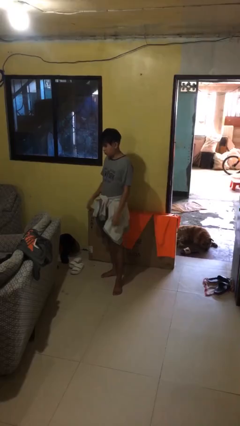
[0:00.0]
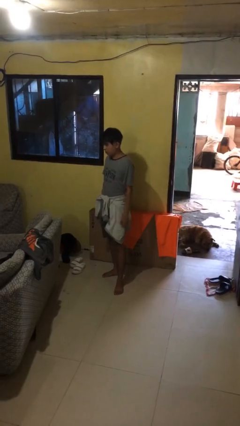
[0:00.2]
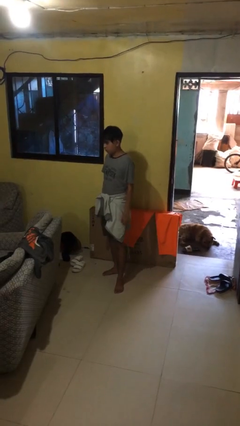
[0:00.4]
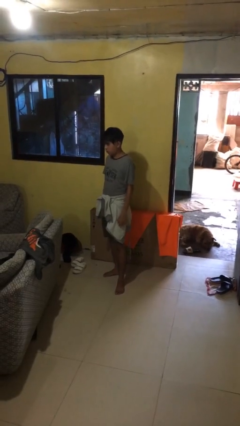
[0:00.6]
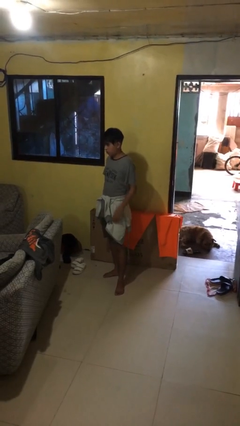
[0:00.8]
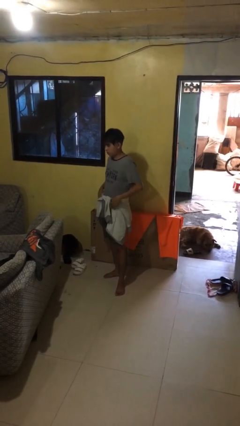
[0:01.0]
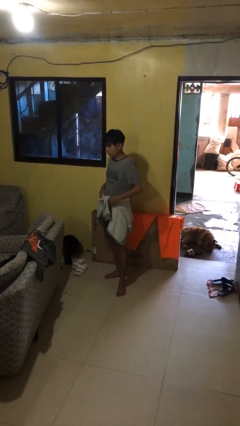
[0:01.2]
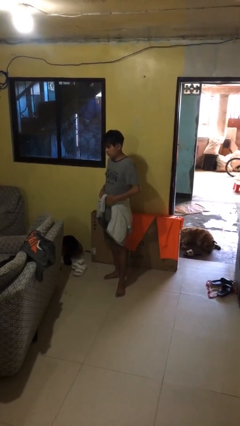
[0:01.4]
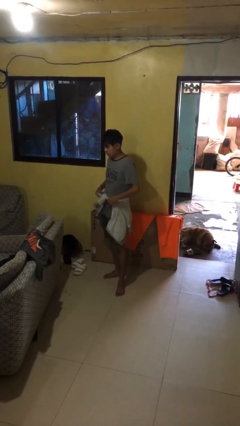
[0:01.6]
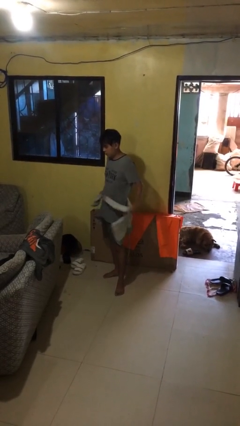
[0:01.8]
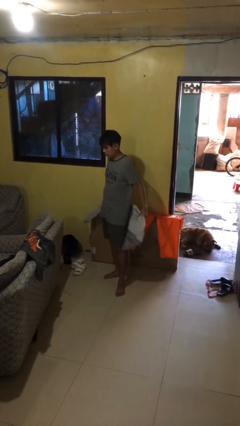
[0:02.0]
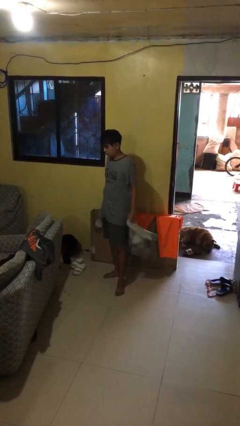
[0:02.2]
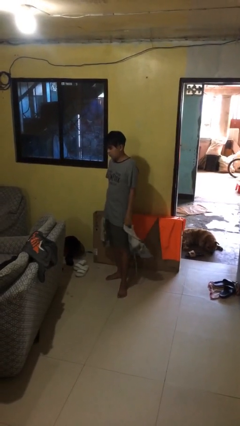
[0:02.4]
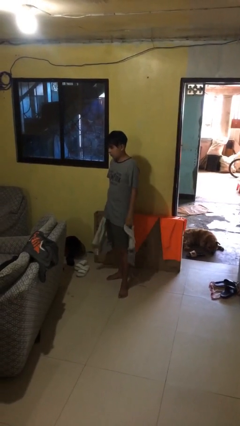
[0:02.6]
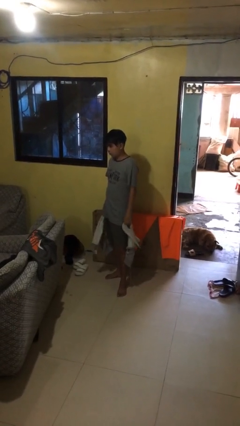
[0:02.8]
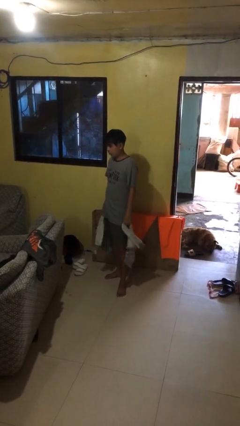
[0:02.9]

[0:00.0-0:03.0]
person unties jacket around waist

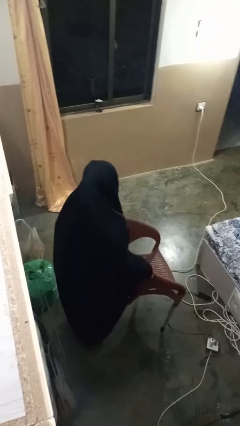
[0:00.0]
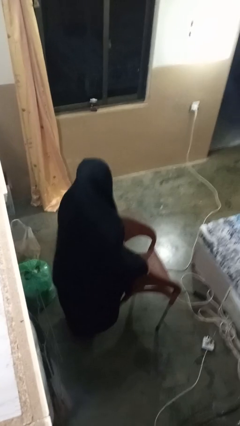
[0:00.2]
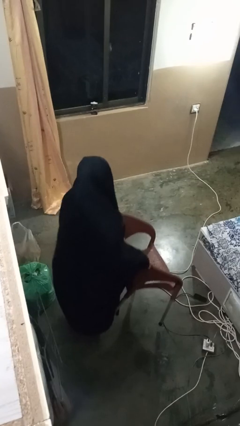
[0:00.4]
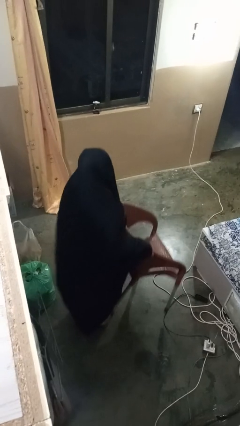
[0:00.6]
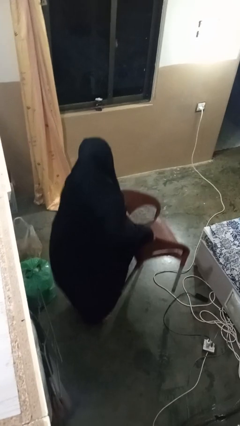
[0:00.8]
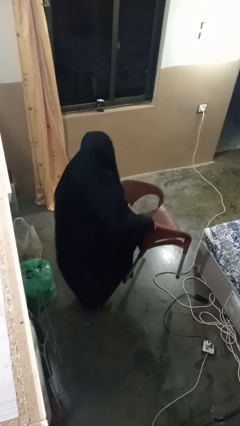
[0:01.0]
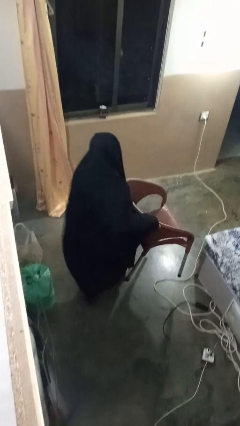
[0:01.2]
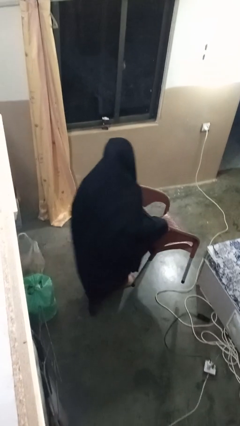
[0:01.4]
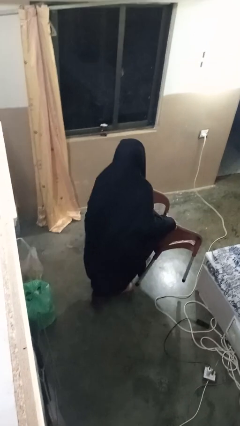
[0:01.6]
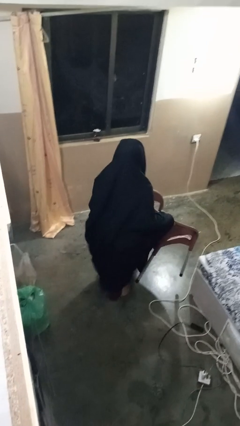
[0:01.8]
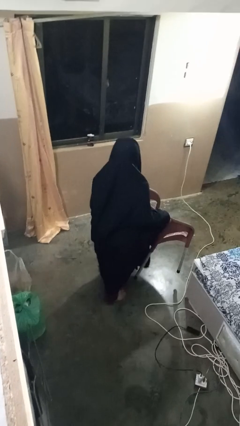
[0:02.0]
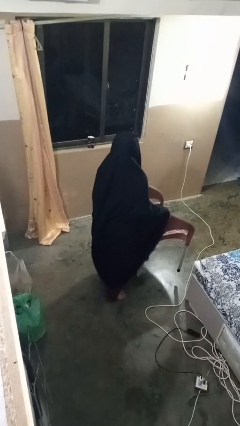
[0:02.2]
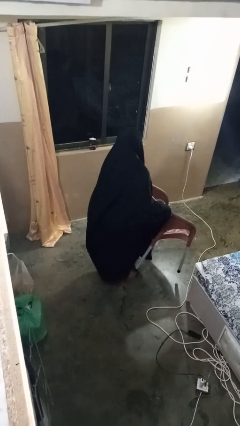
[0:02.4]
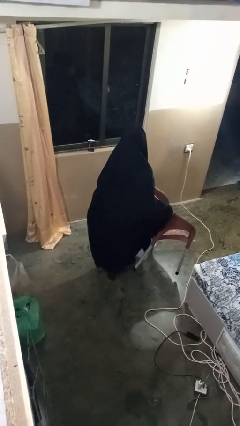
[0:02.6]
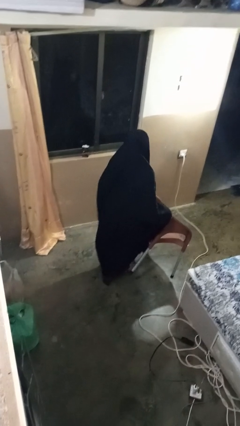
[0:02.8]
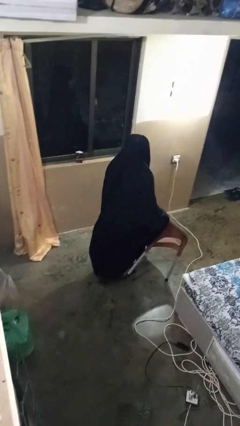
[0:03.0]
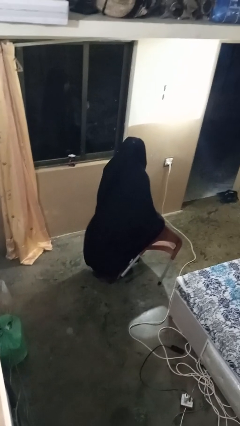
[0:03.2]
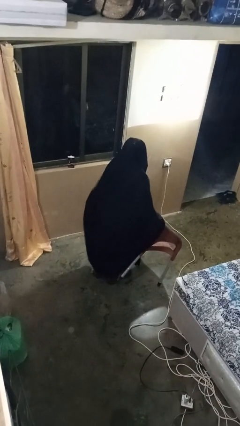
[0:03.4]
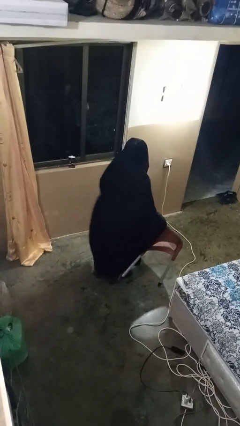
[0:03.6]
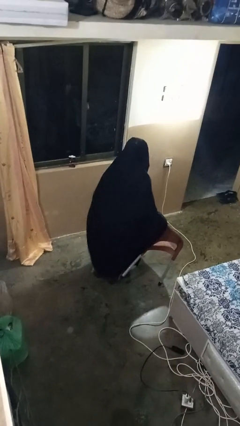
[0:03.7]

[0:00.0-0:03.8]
person carries furniture

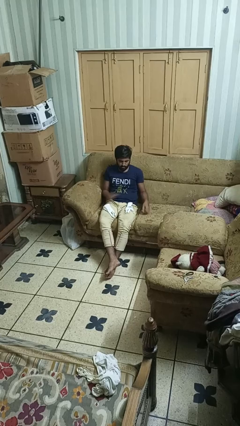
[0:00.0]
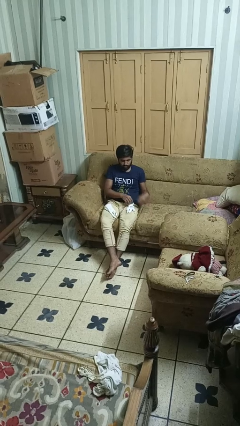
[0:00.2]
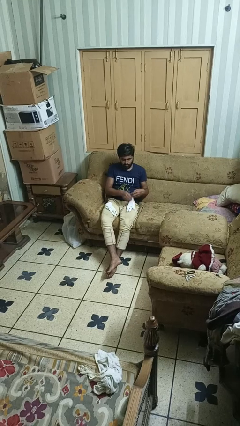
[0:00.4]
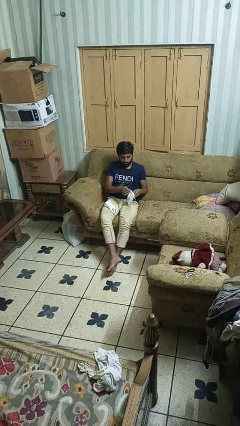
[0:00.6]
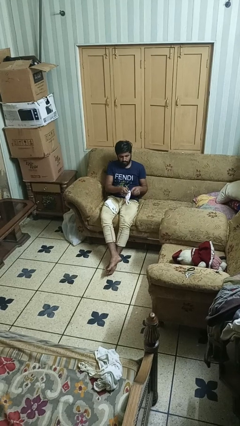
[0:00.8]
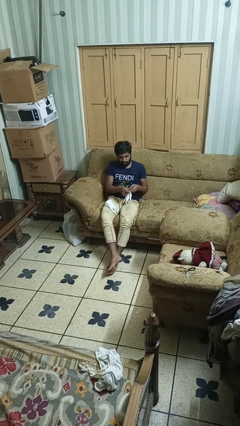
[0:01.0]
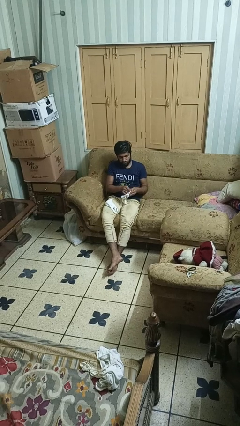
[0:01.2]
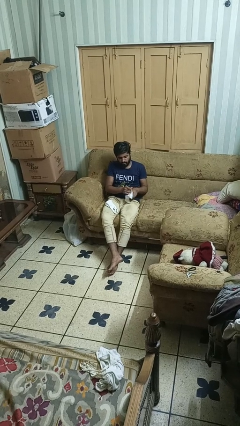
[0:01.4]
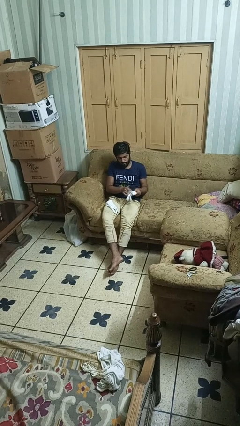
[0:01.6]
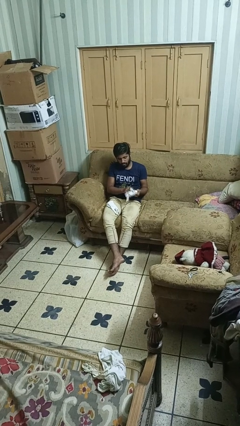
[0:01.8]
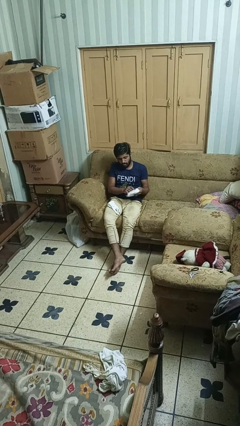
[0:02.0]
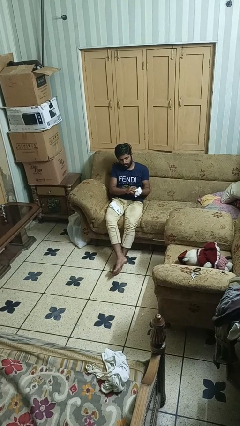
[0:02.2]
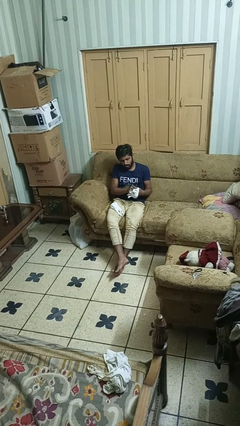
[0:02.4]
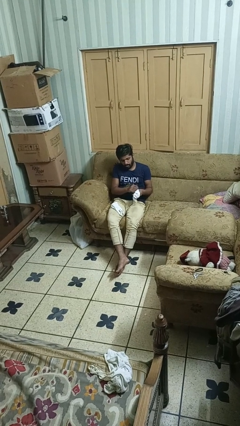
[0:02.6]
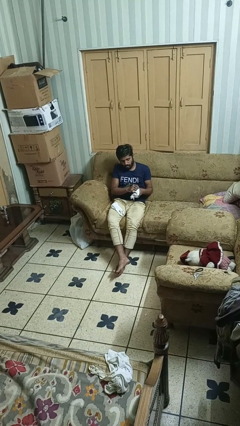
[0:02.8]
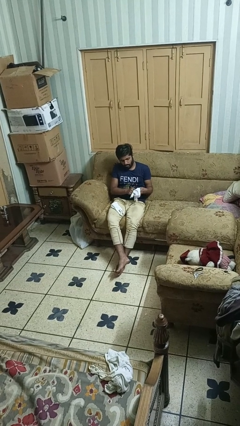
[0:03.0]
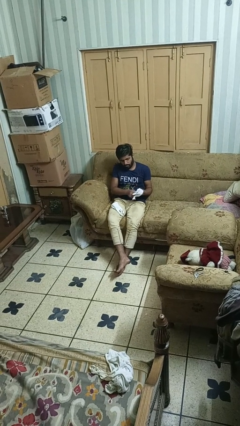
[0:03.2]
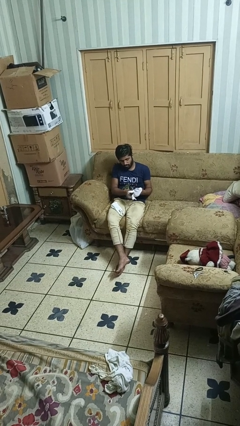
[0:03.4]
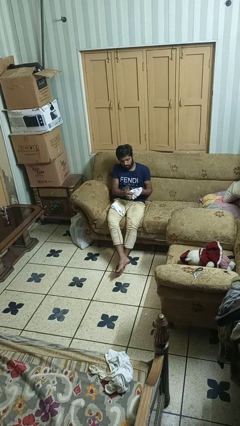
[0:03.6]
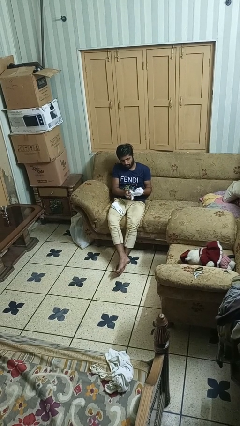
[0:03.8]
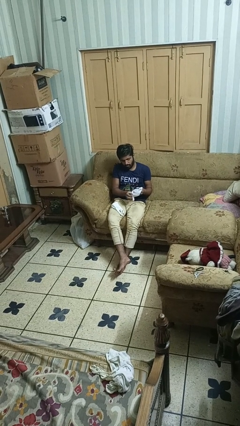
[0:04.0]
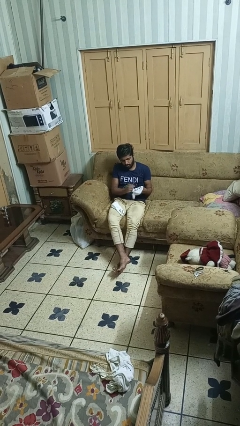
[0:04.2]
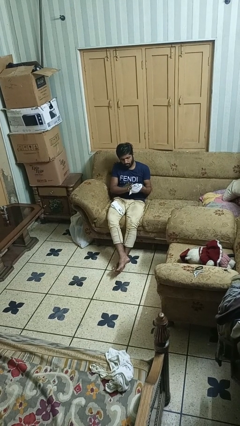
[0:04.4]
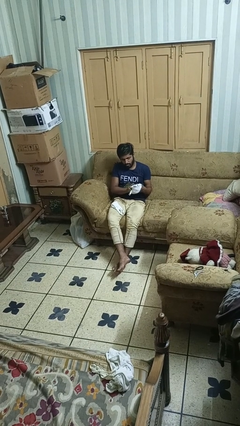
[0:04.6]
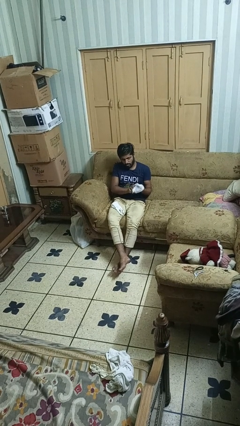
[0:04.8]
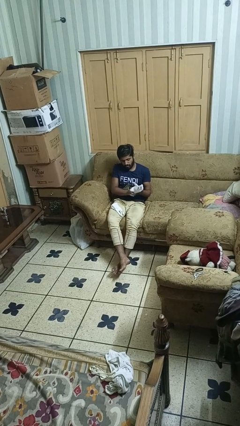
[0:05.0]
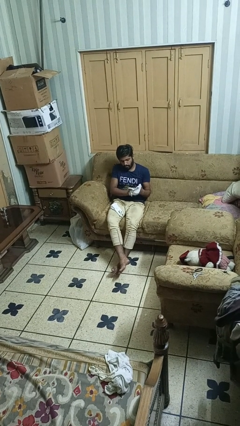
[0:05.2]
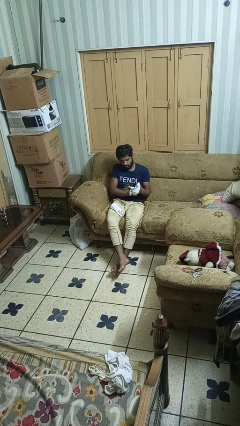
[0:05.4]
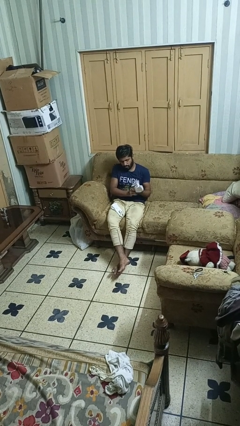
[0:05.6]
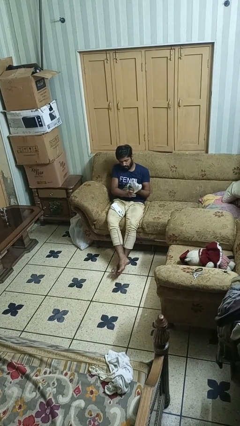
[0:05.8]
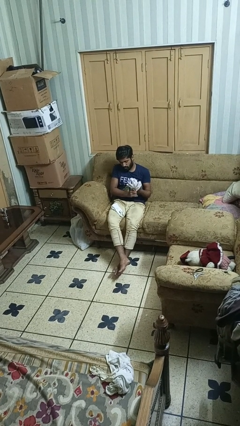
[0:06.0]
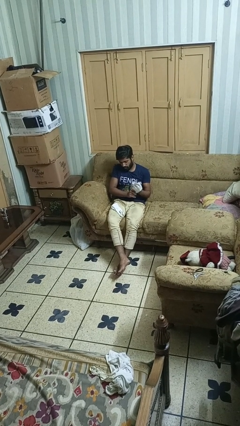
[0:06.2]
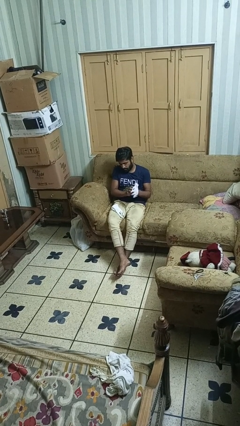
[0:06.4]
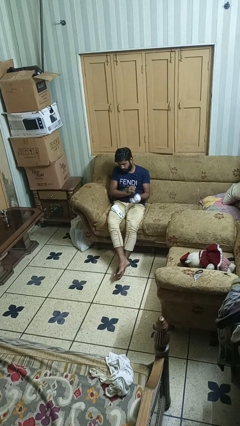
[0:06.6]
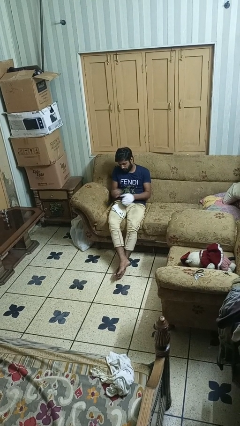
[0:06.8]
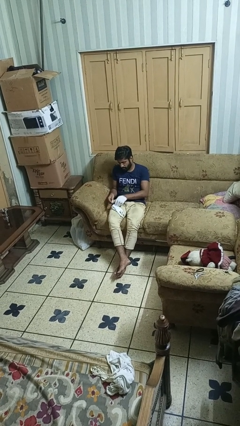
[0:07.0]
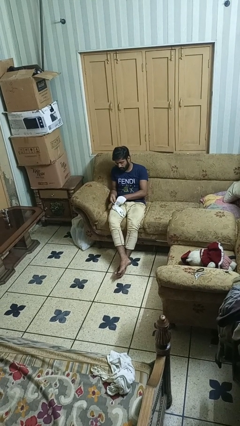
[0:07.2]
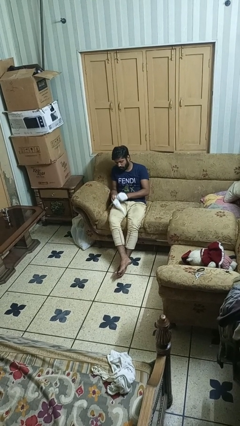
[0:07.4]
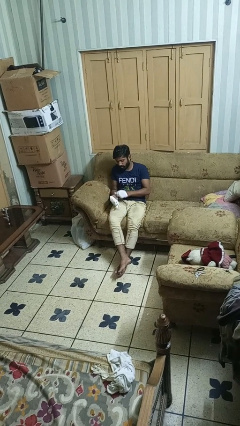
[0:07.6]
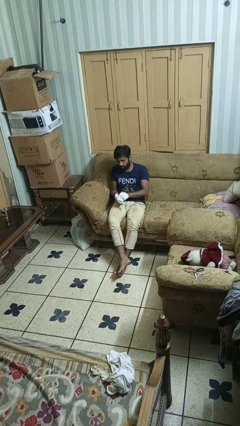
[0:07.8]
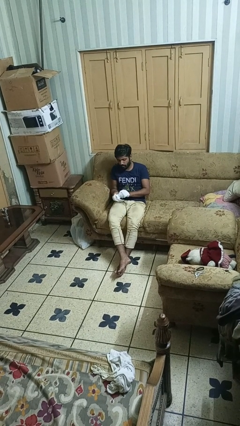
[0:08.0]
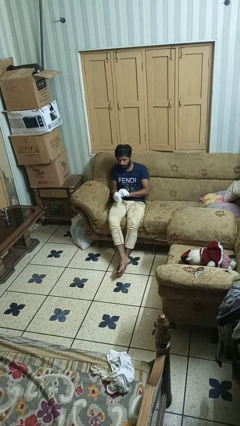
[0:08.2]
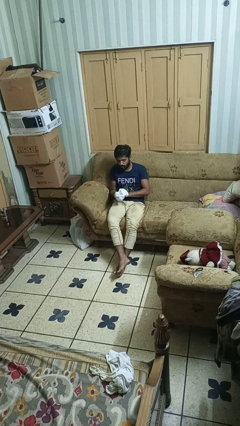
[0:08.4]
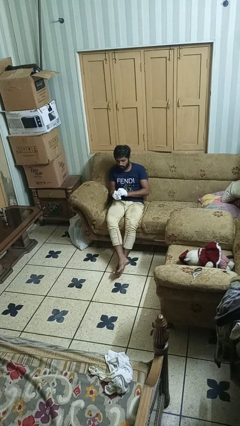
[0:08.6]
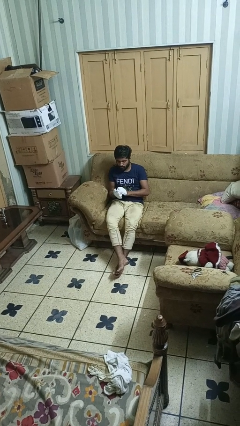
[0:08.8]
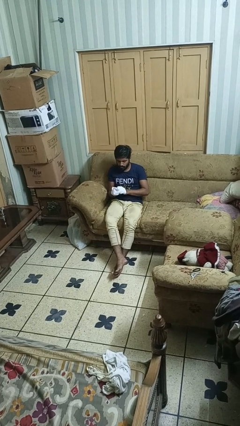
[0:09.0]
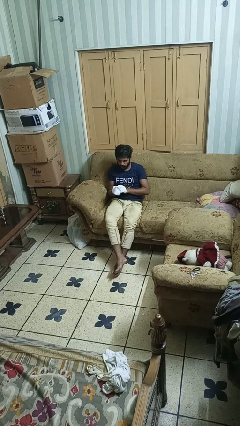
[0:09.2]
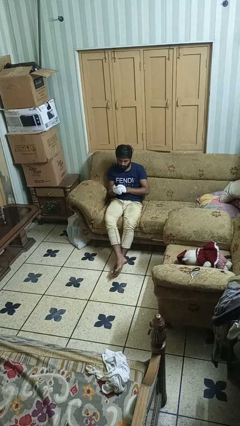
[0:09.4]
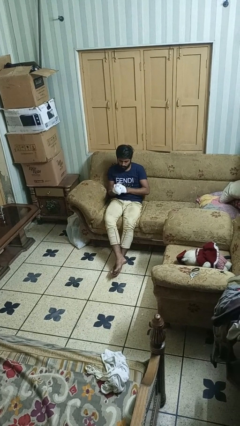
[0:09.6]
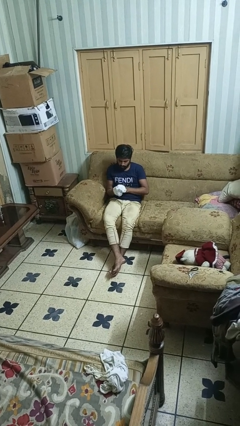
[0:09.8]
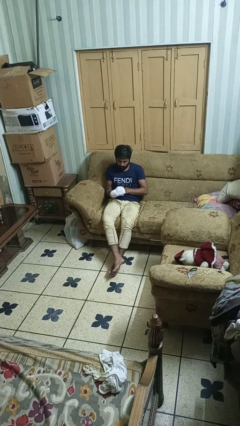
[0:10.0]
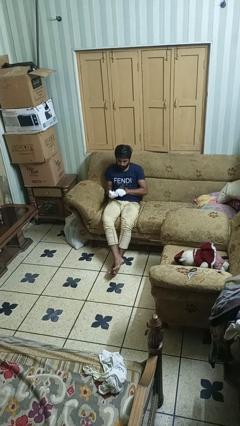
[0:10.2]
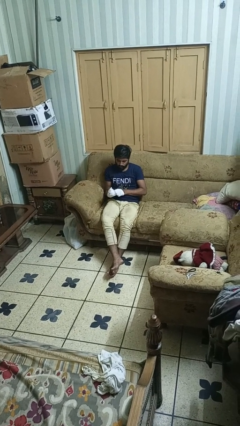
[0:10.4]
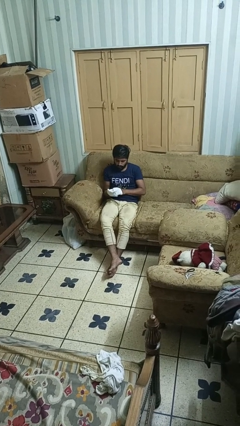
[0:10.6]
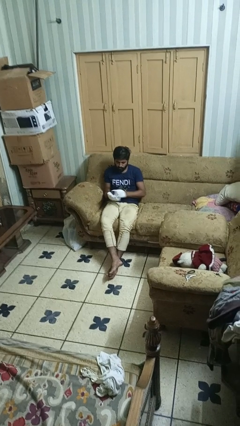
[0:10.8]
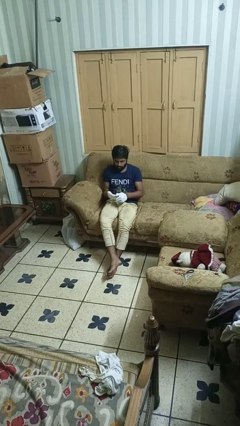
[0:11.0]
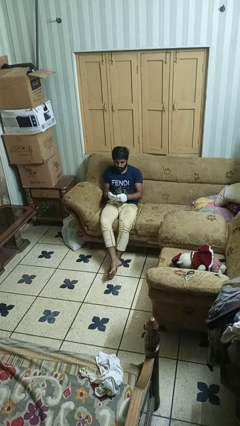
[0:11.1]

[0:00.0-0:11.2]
person puts on gloves
